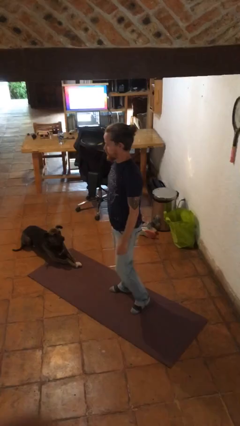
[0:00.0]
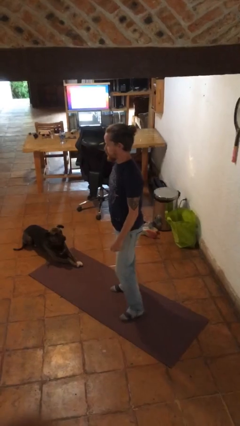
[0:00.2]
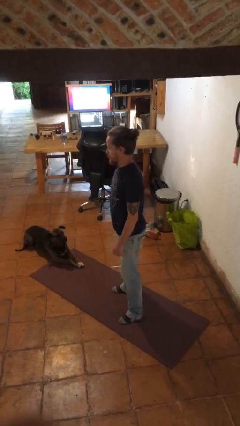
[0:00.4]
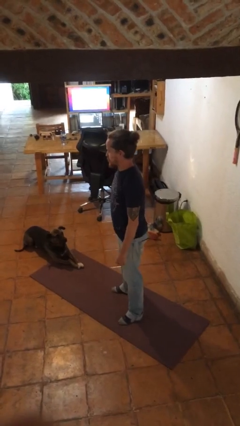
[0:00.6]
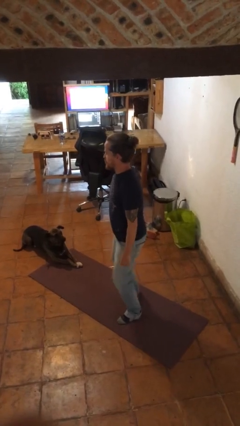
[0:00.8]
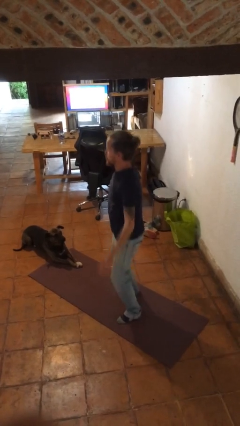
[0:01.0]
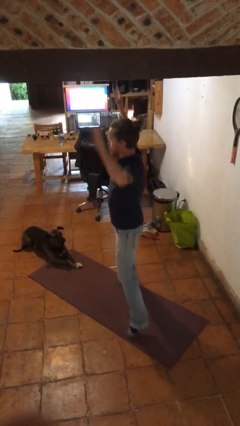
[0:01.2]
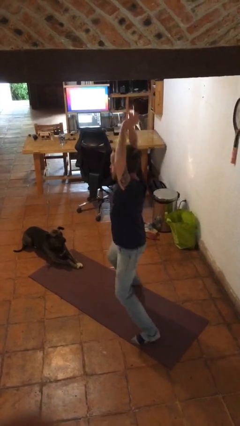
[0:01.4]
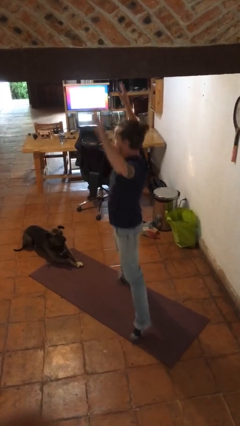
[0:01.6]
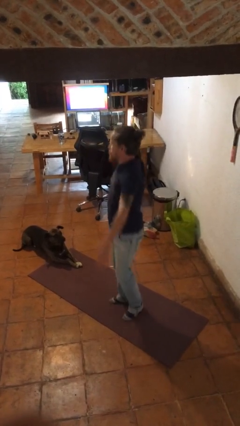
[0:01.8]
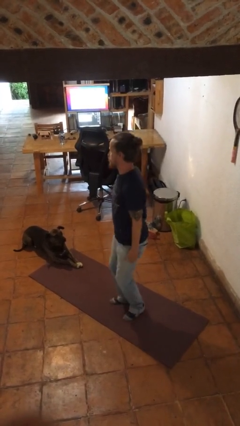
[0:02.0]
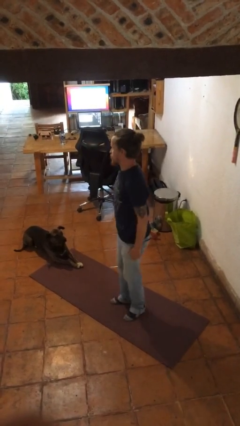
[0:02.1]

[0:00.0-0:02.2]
person exercises with jumping jacks

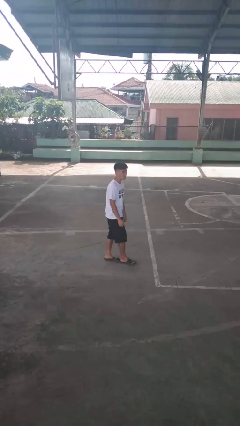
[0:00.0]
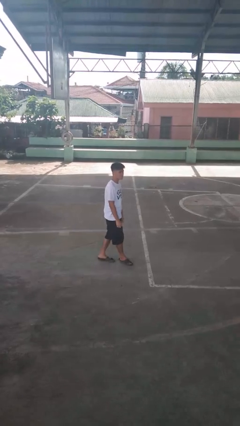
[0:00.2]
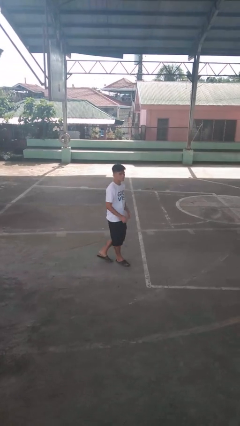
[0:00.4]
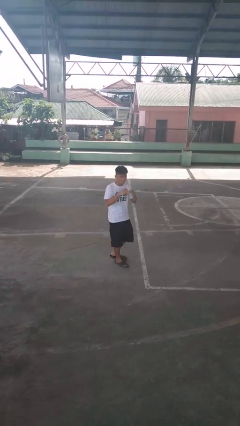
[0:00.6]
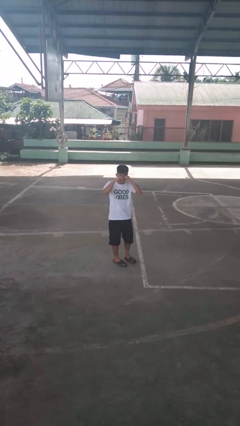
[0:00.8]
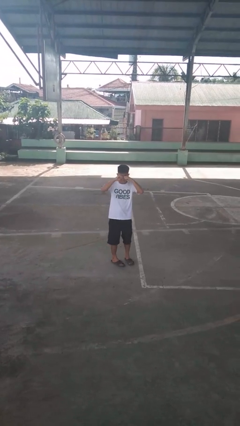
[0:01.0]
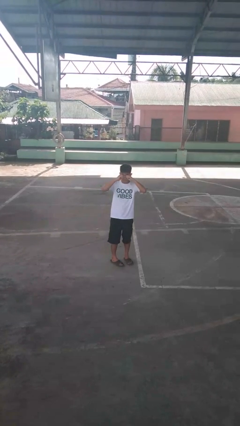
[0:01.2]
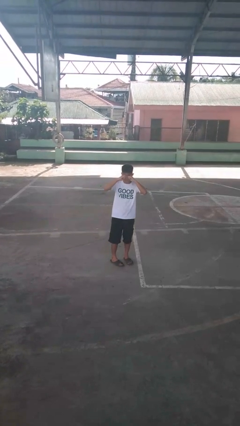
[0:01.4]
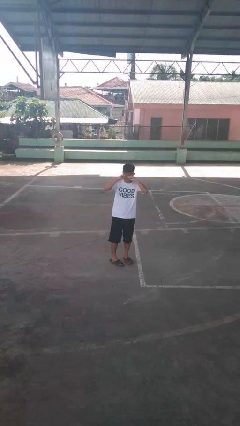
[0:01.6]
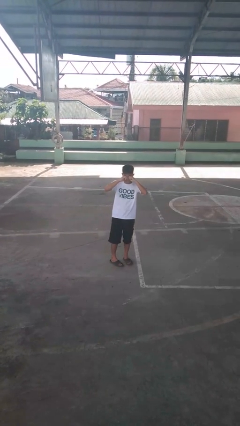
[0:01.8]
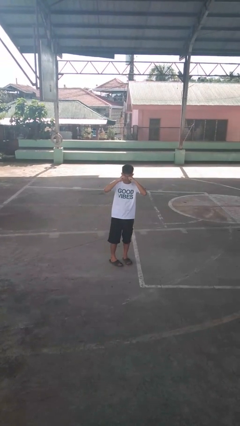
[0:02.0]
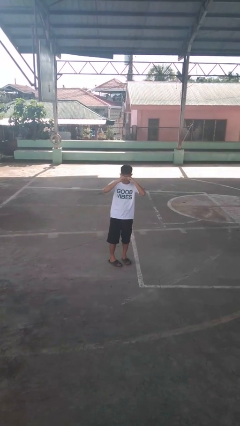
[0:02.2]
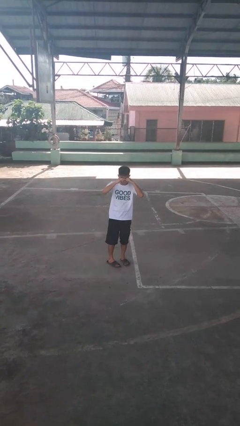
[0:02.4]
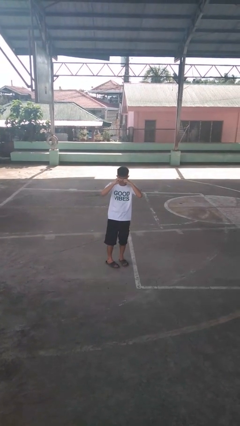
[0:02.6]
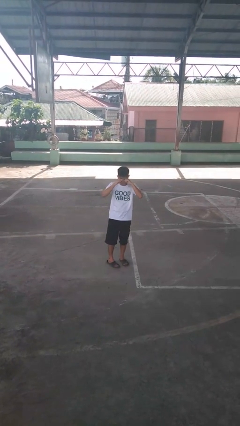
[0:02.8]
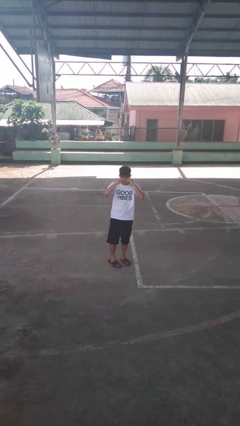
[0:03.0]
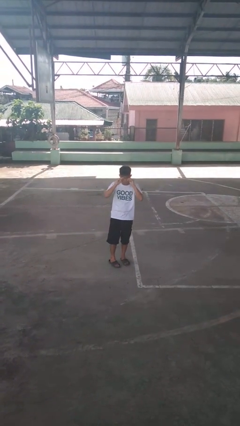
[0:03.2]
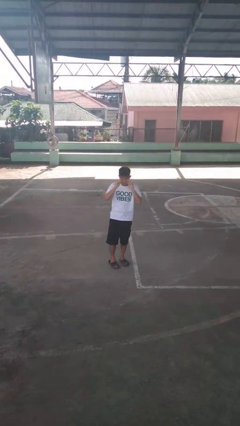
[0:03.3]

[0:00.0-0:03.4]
person rubs eyes

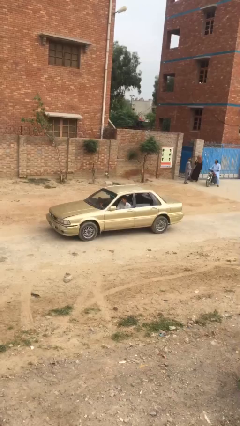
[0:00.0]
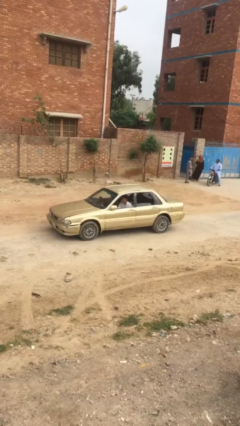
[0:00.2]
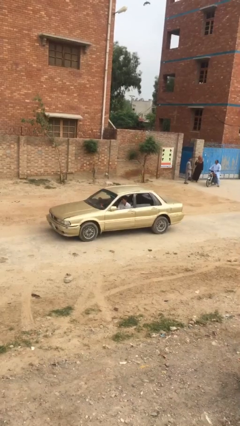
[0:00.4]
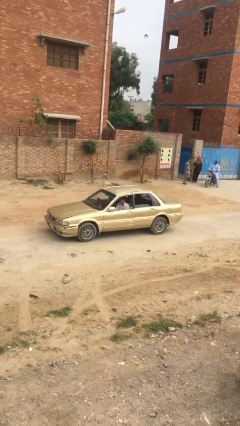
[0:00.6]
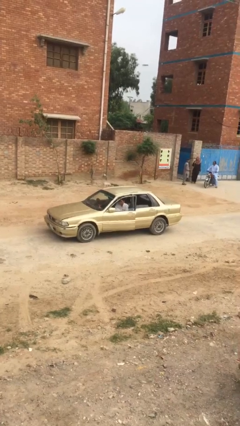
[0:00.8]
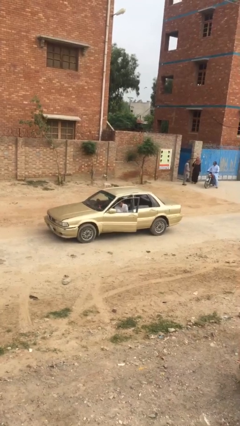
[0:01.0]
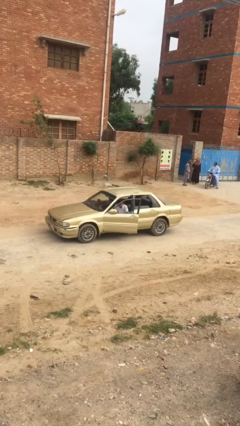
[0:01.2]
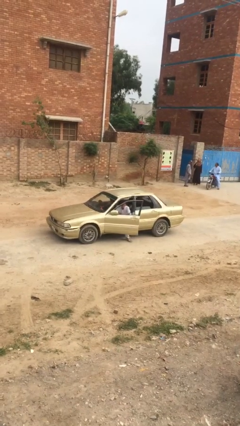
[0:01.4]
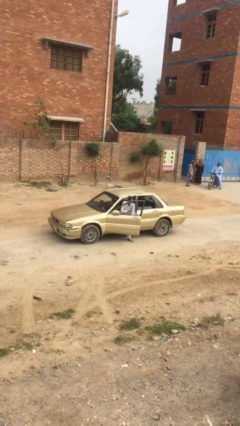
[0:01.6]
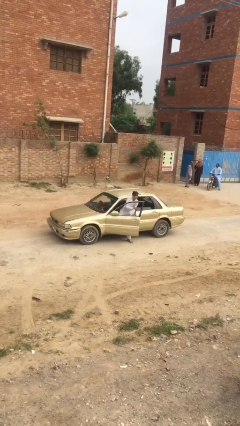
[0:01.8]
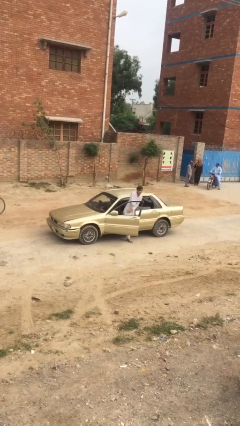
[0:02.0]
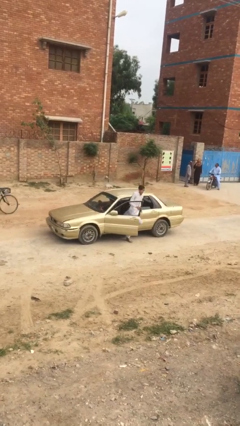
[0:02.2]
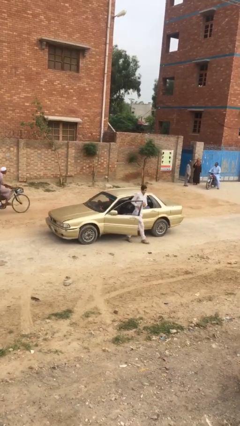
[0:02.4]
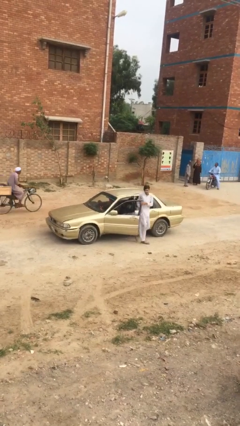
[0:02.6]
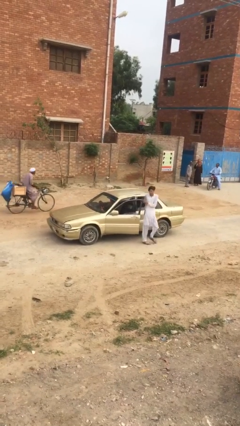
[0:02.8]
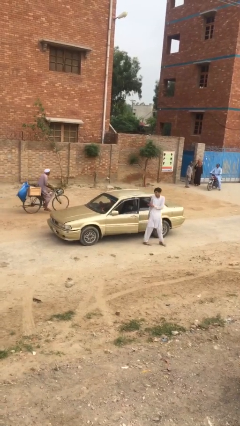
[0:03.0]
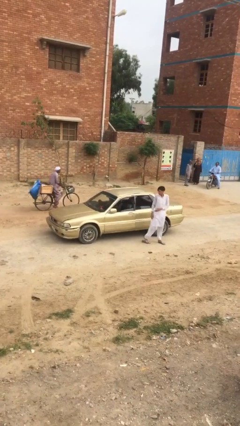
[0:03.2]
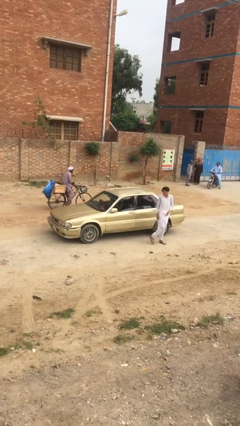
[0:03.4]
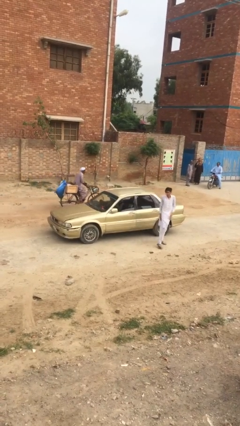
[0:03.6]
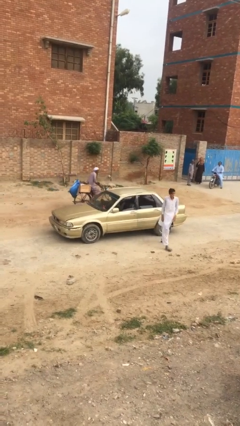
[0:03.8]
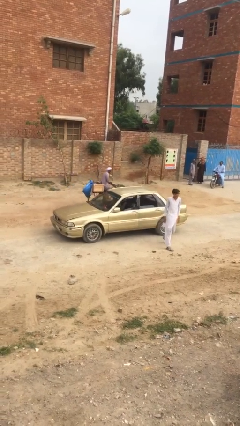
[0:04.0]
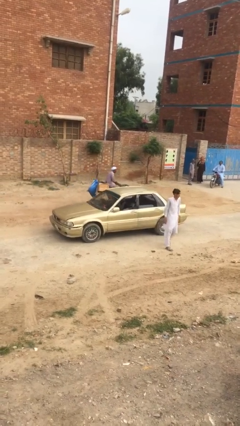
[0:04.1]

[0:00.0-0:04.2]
car drops off person

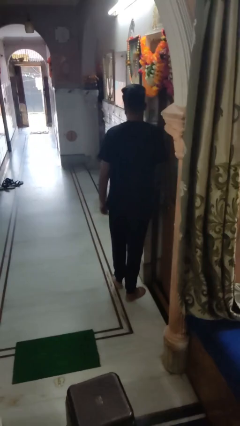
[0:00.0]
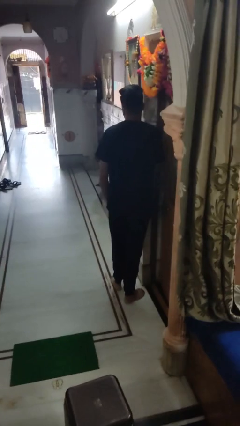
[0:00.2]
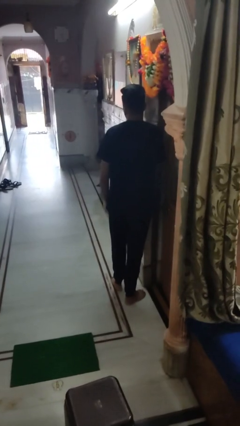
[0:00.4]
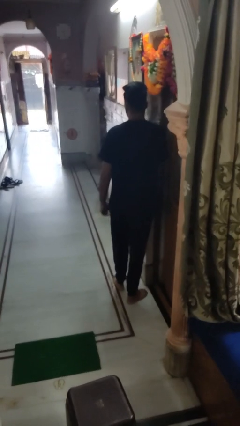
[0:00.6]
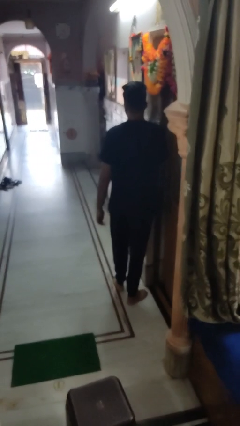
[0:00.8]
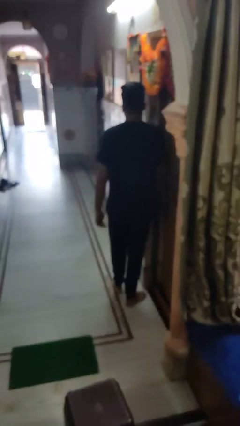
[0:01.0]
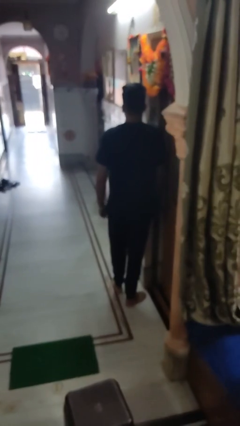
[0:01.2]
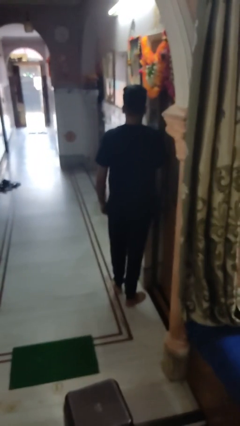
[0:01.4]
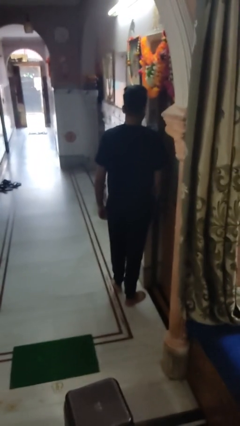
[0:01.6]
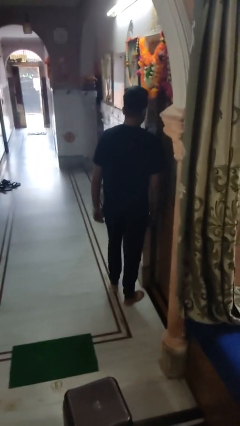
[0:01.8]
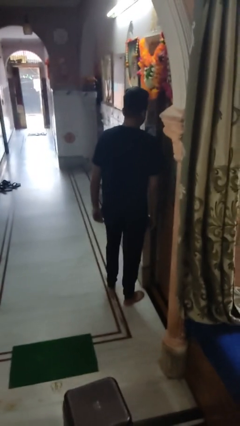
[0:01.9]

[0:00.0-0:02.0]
person bumps into wall

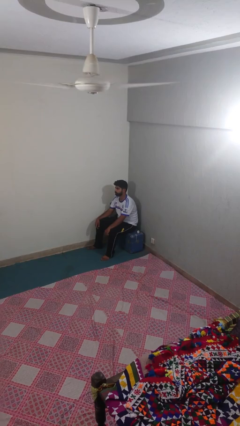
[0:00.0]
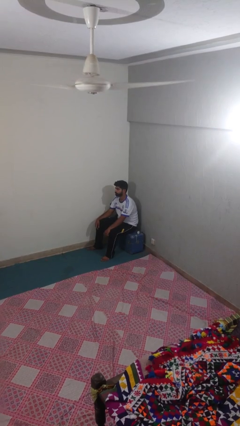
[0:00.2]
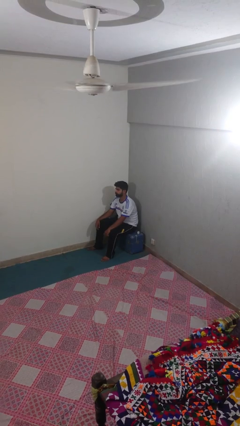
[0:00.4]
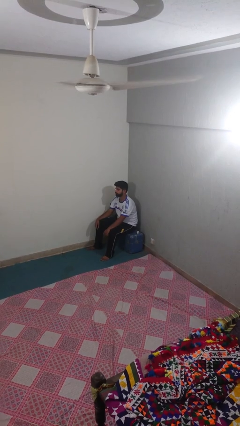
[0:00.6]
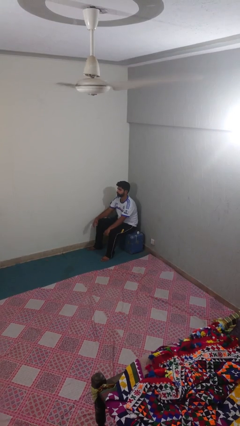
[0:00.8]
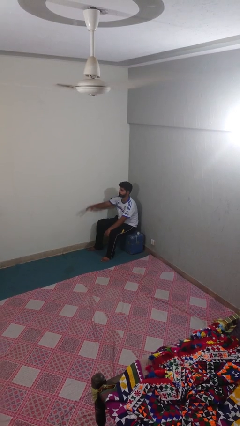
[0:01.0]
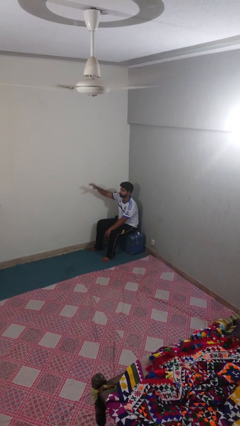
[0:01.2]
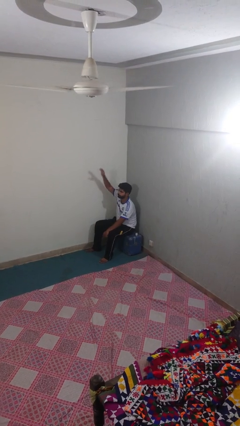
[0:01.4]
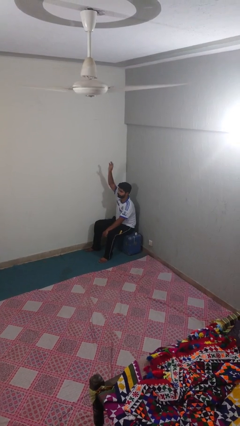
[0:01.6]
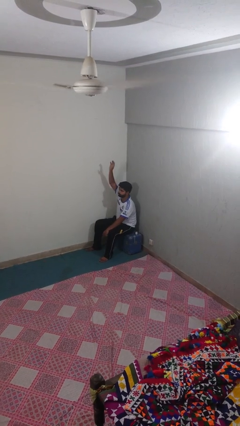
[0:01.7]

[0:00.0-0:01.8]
person gestures raise hand

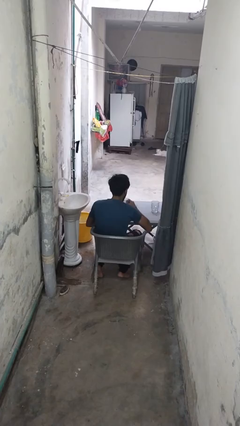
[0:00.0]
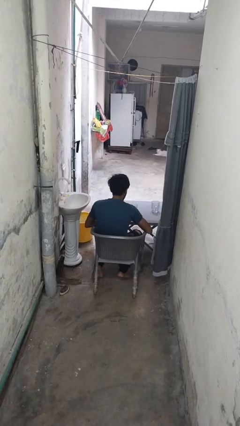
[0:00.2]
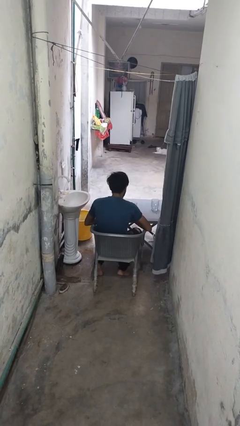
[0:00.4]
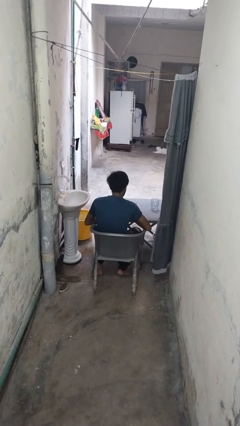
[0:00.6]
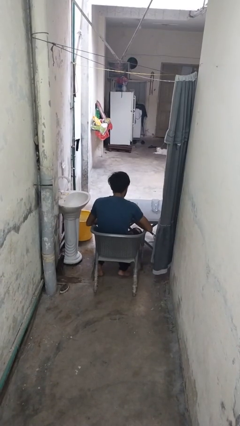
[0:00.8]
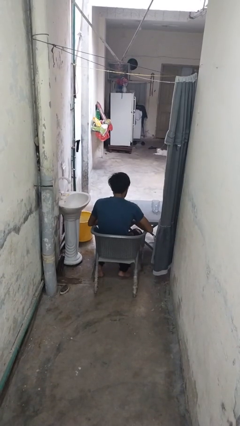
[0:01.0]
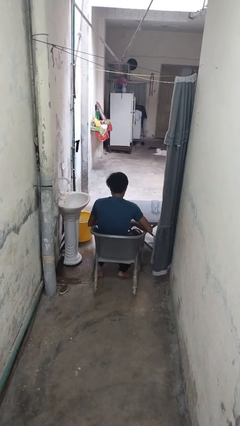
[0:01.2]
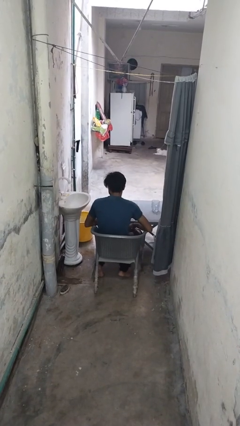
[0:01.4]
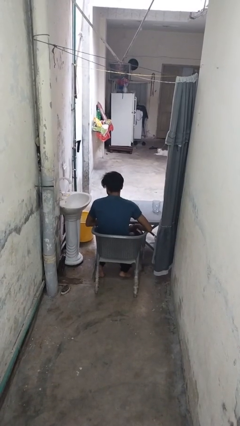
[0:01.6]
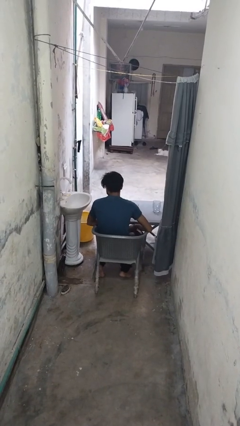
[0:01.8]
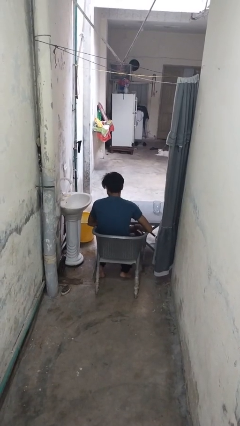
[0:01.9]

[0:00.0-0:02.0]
person puts down object on table

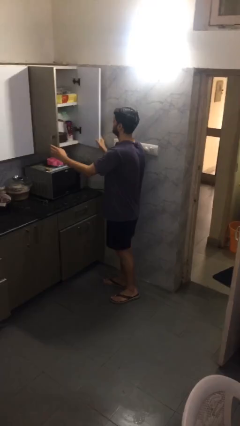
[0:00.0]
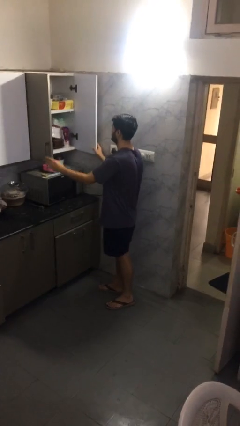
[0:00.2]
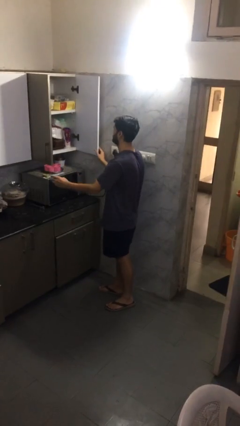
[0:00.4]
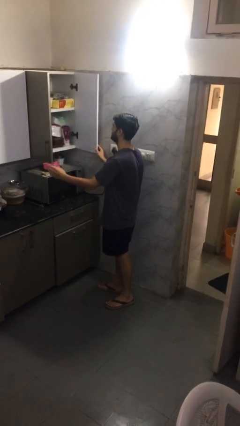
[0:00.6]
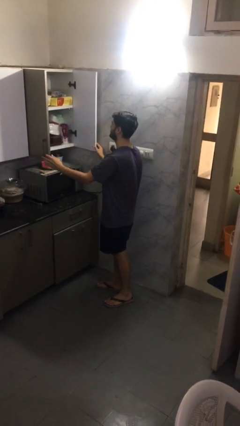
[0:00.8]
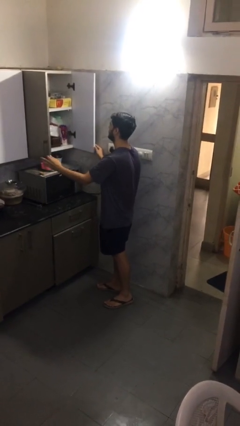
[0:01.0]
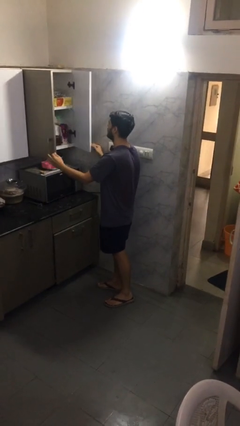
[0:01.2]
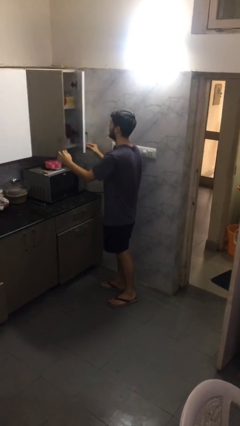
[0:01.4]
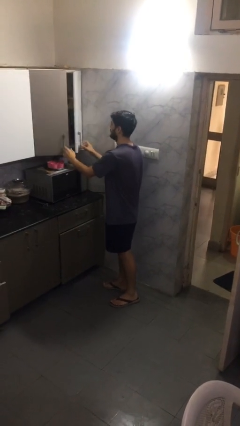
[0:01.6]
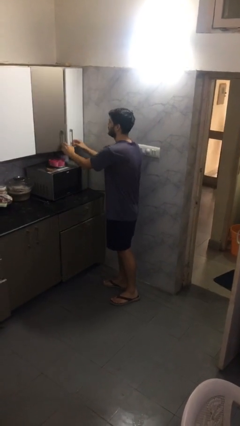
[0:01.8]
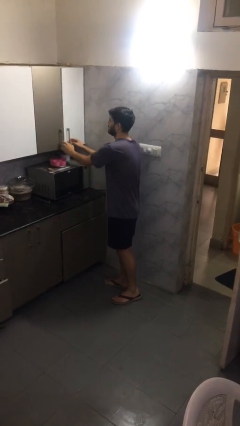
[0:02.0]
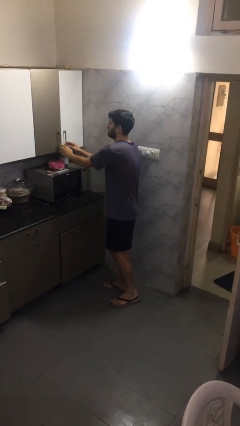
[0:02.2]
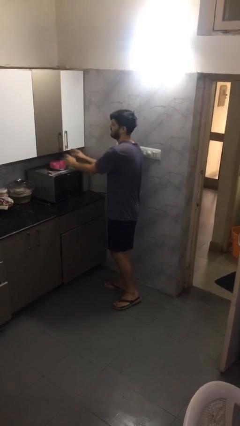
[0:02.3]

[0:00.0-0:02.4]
person closes cabinet
